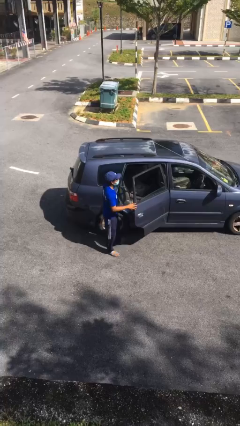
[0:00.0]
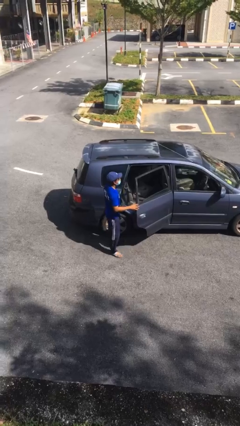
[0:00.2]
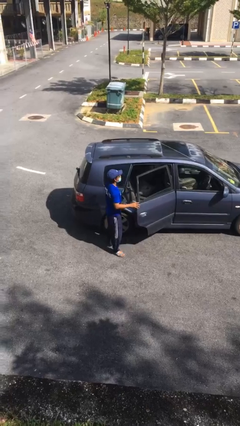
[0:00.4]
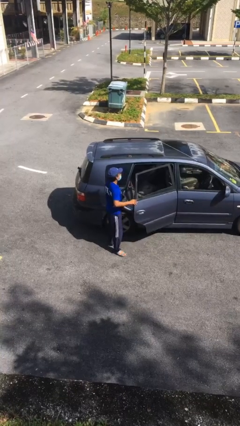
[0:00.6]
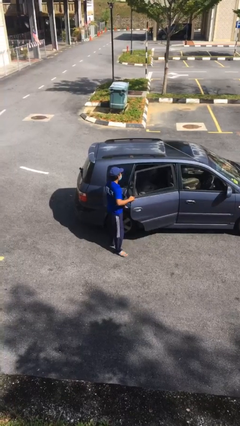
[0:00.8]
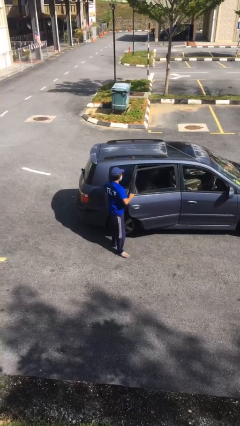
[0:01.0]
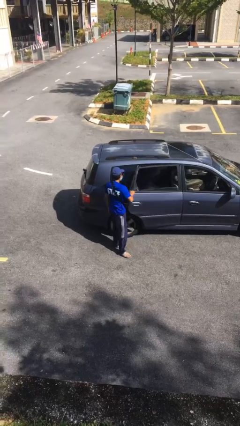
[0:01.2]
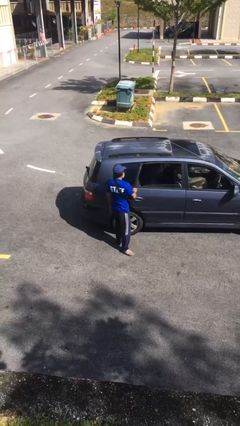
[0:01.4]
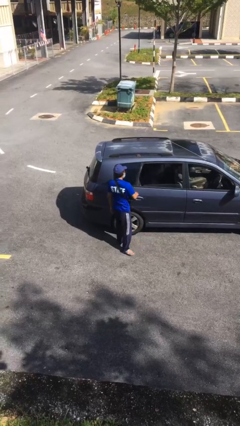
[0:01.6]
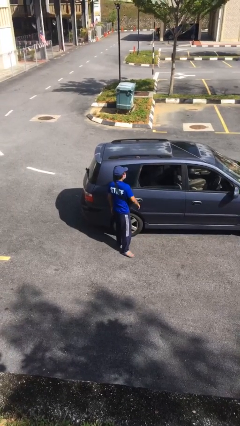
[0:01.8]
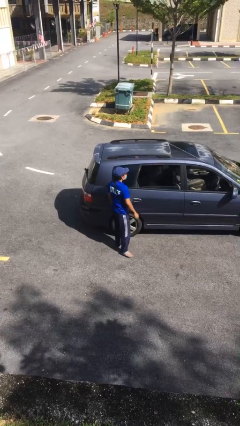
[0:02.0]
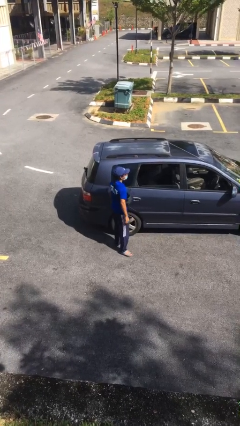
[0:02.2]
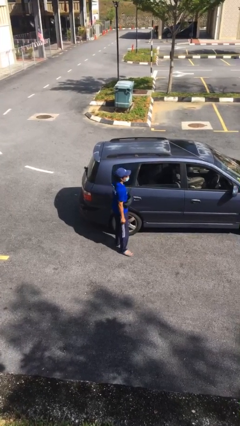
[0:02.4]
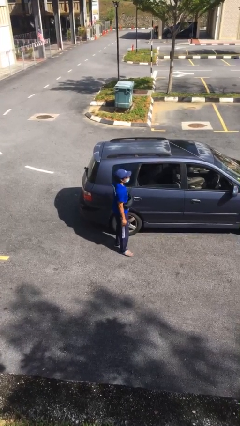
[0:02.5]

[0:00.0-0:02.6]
person closes car door

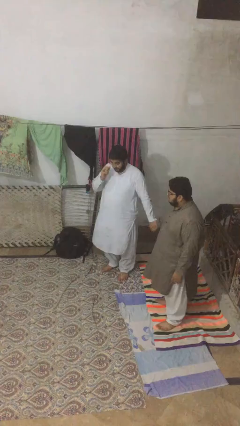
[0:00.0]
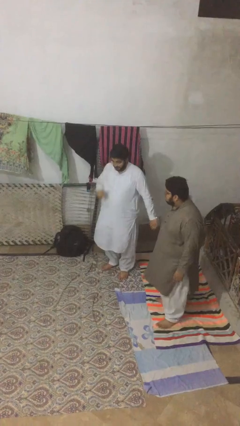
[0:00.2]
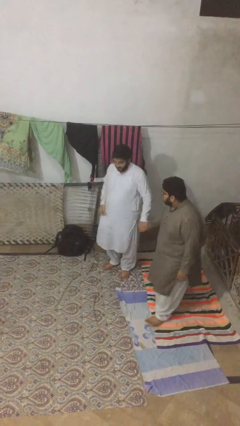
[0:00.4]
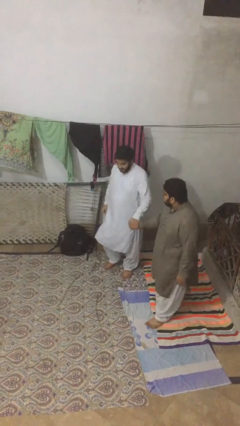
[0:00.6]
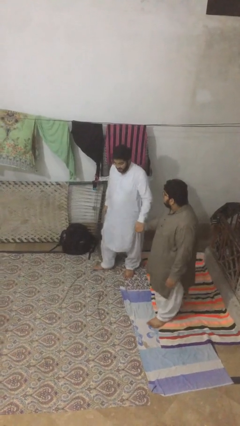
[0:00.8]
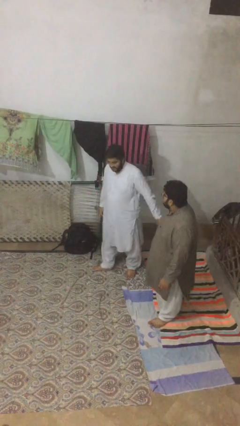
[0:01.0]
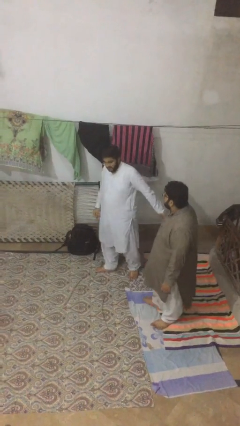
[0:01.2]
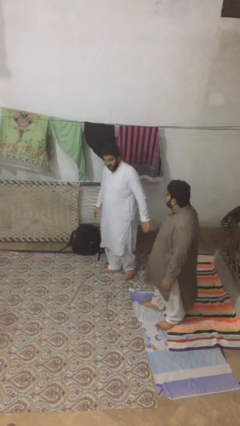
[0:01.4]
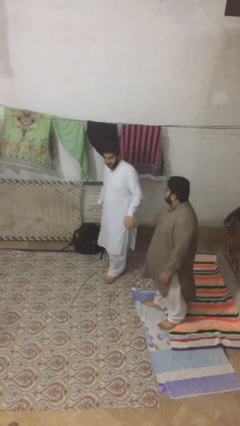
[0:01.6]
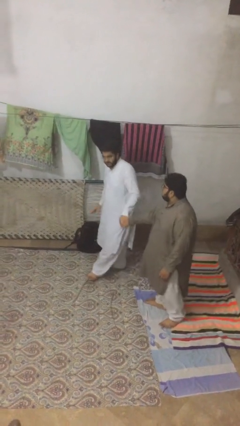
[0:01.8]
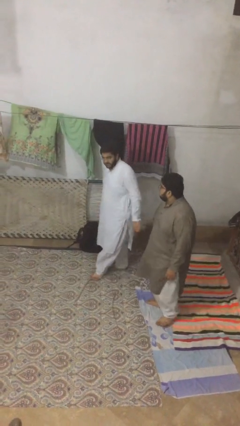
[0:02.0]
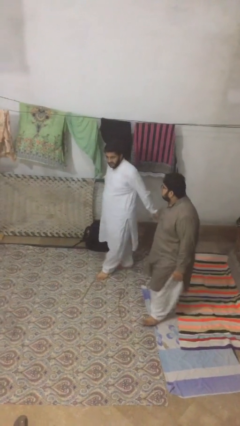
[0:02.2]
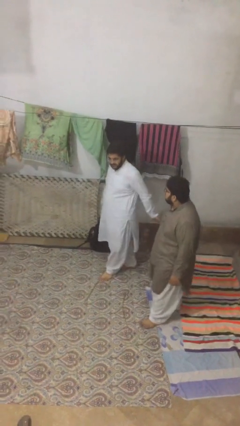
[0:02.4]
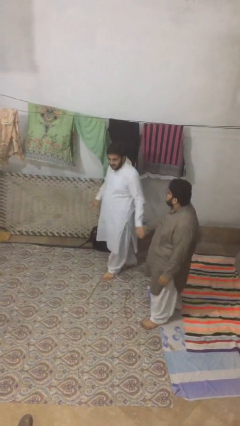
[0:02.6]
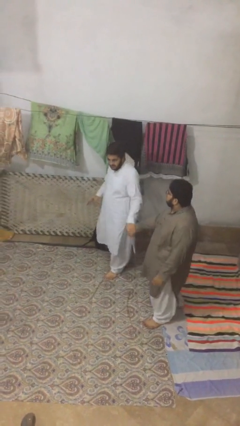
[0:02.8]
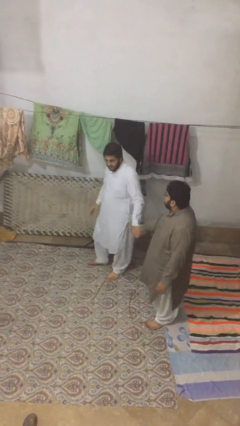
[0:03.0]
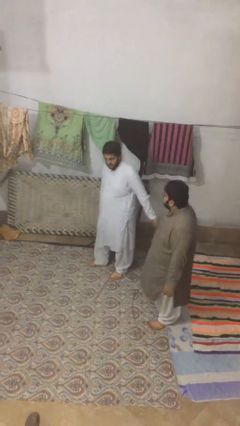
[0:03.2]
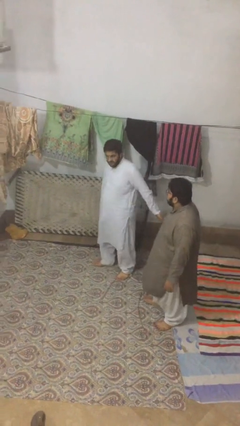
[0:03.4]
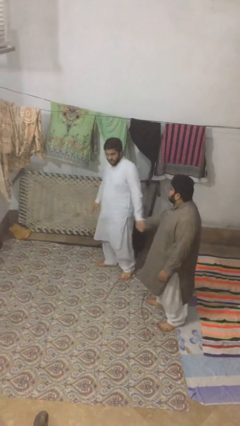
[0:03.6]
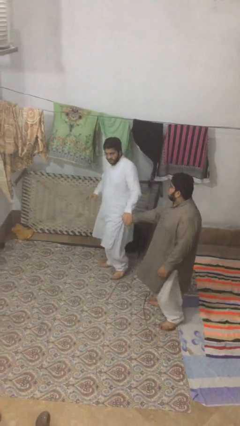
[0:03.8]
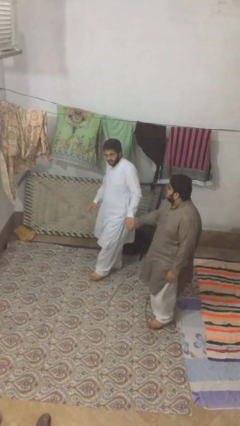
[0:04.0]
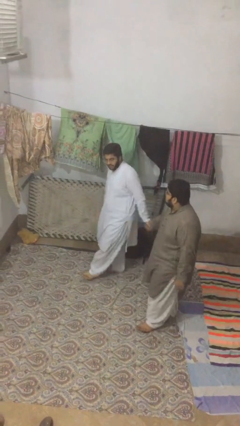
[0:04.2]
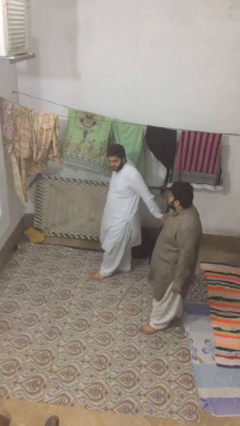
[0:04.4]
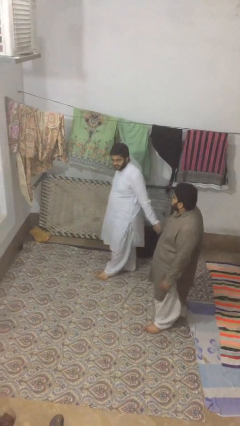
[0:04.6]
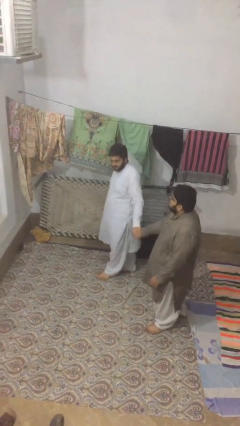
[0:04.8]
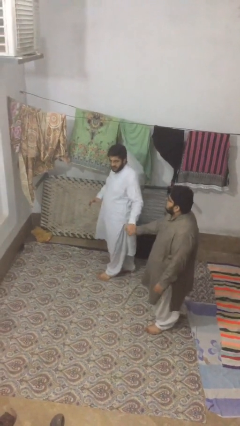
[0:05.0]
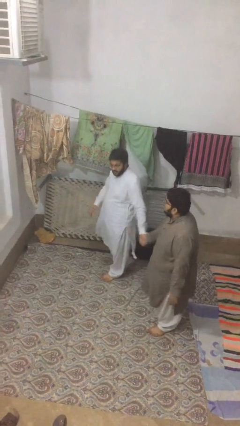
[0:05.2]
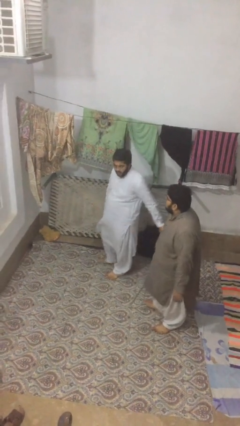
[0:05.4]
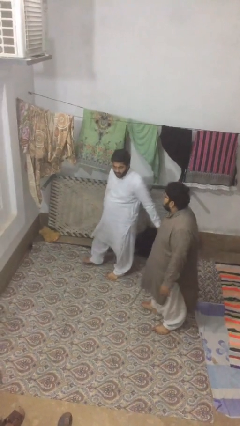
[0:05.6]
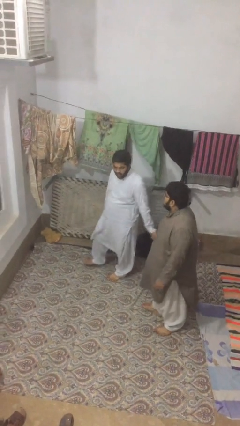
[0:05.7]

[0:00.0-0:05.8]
person holds hand

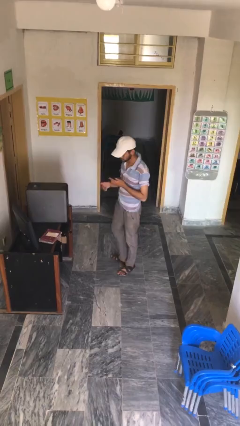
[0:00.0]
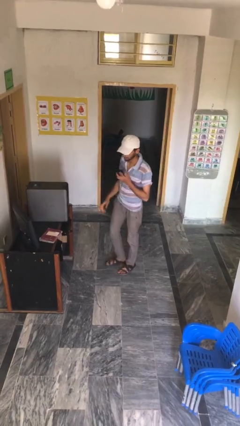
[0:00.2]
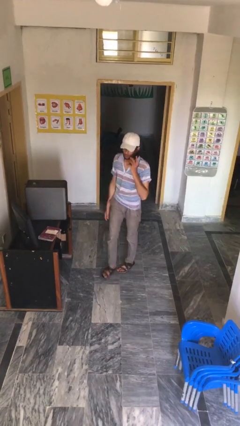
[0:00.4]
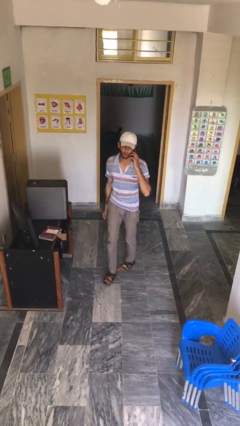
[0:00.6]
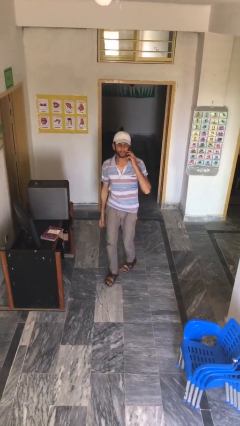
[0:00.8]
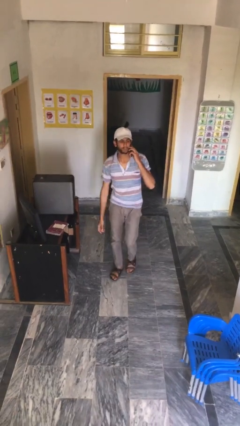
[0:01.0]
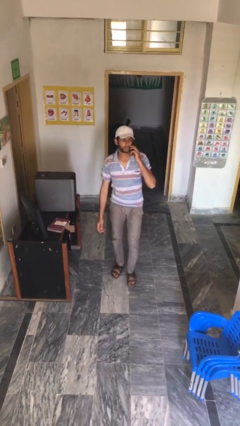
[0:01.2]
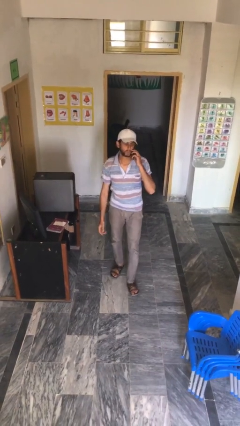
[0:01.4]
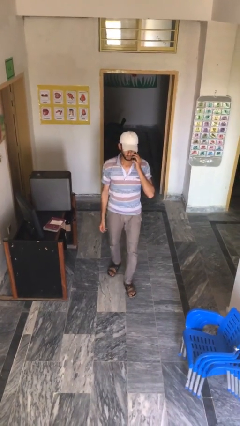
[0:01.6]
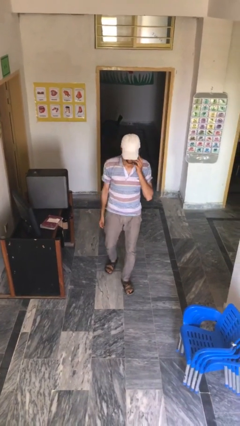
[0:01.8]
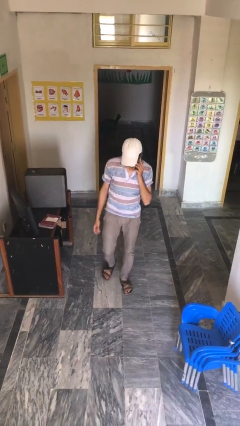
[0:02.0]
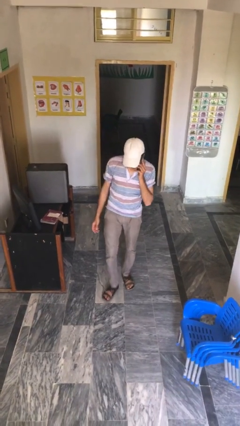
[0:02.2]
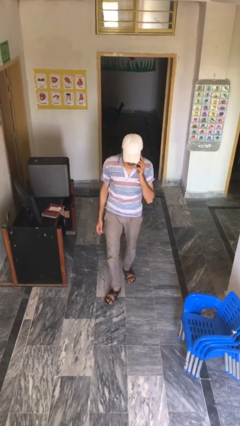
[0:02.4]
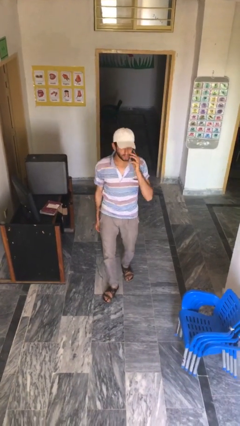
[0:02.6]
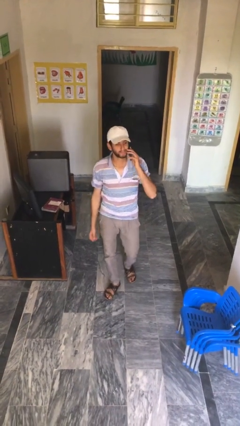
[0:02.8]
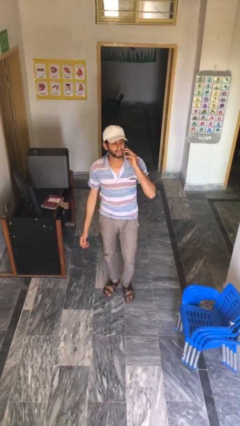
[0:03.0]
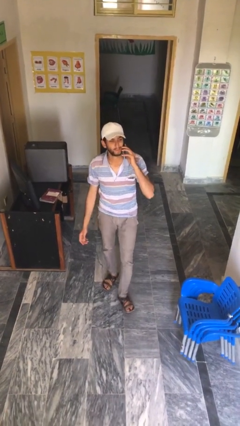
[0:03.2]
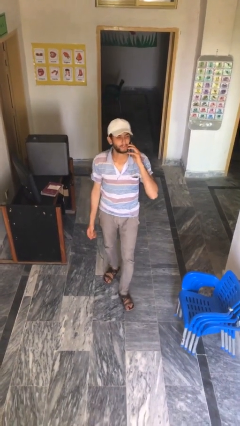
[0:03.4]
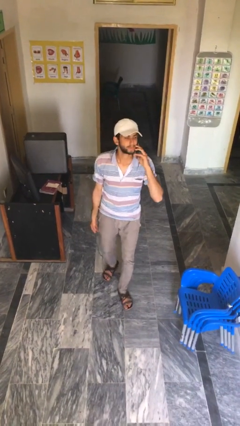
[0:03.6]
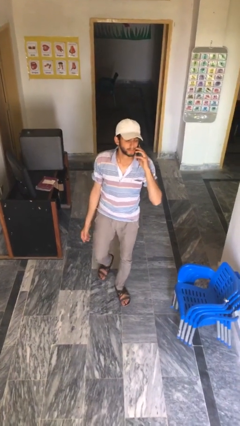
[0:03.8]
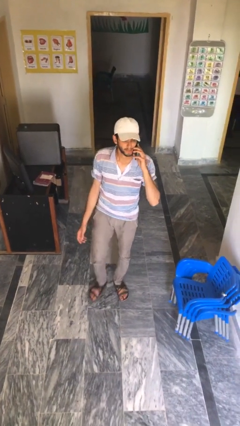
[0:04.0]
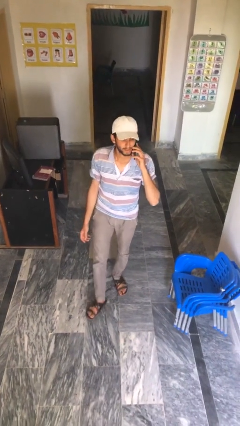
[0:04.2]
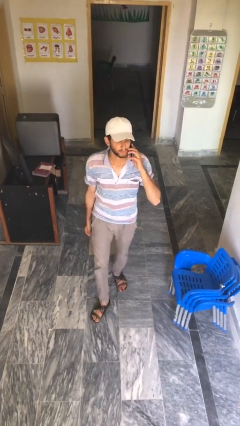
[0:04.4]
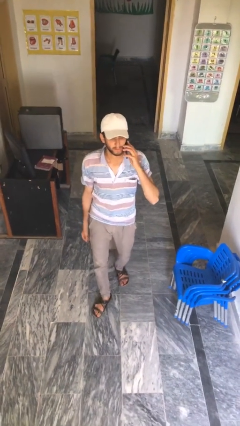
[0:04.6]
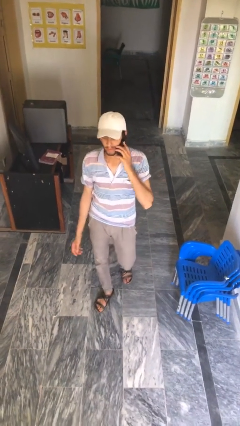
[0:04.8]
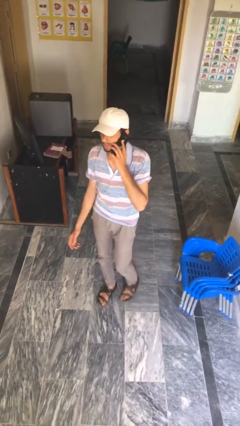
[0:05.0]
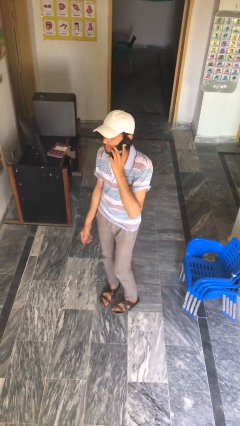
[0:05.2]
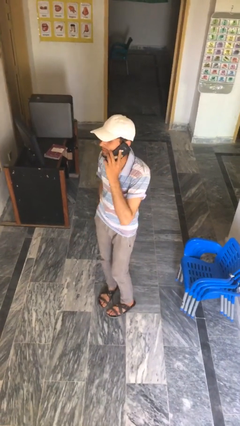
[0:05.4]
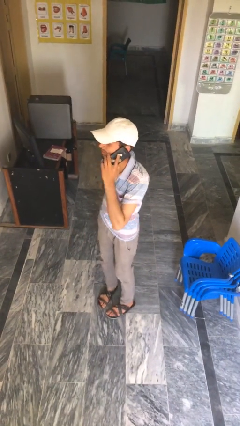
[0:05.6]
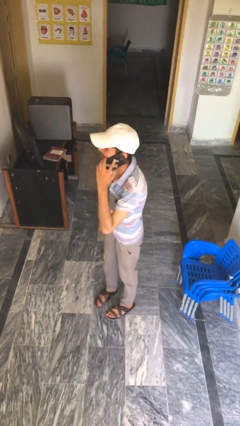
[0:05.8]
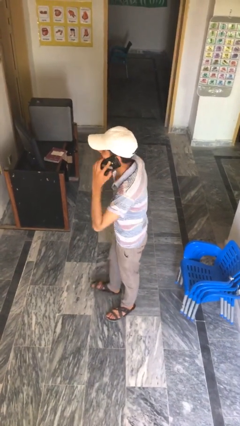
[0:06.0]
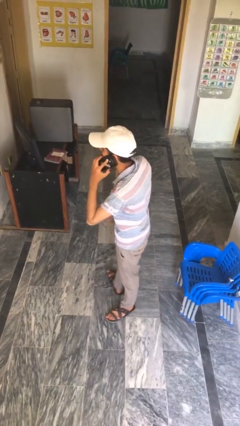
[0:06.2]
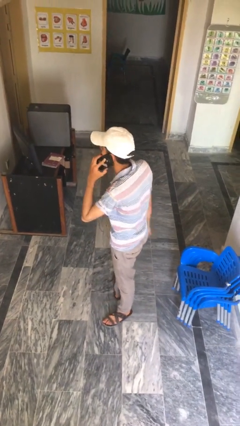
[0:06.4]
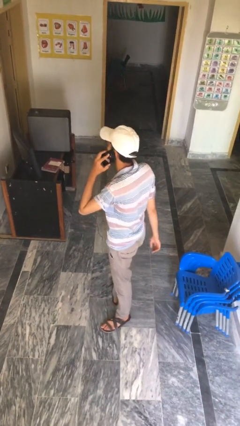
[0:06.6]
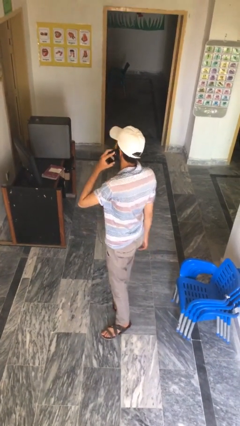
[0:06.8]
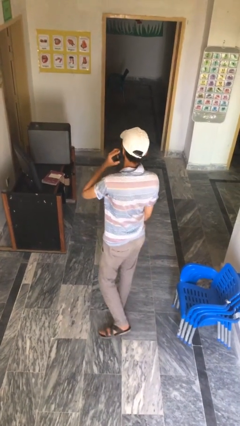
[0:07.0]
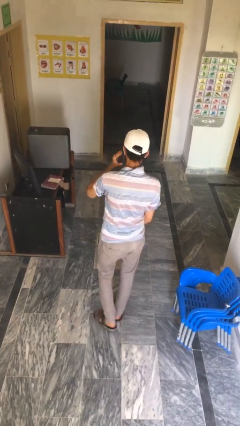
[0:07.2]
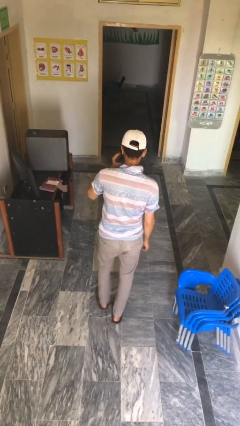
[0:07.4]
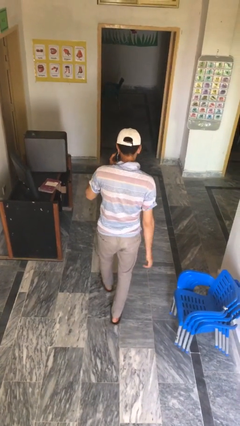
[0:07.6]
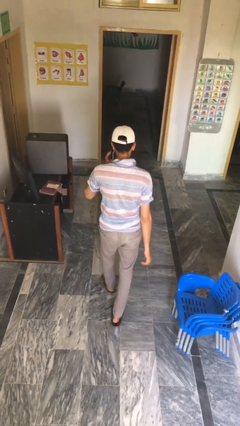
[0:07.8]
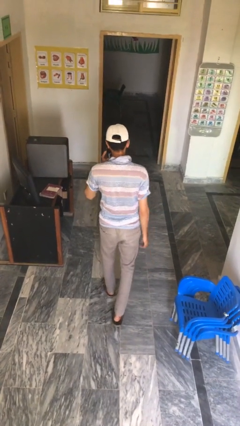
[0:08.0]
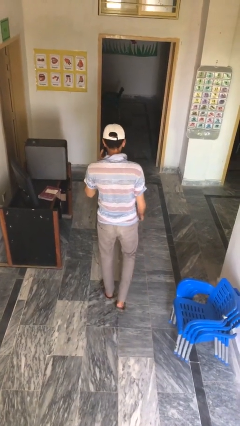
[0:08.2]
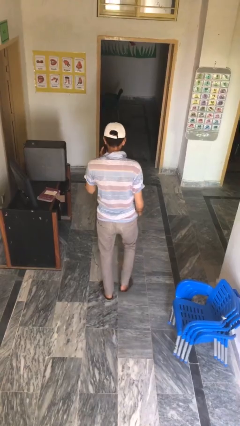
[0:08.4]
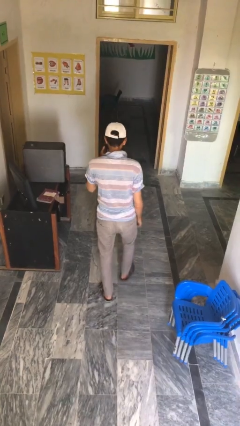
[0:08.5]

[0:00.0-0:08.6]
person talks on phone

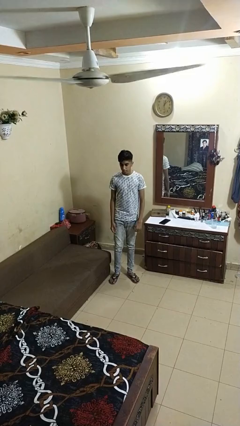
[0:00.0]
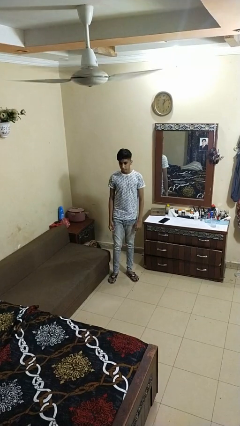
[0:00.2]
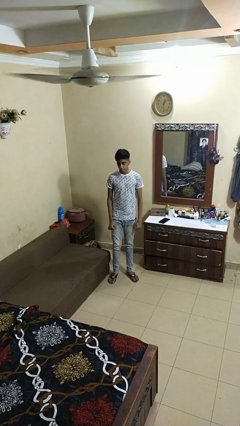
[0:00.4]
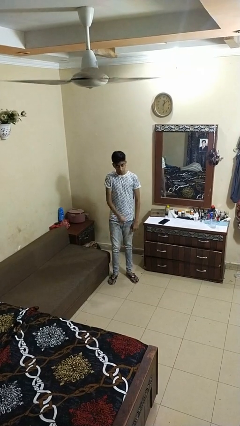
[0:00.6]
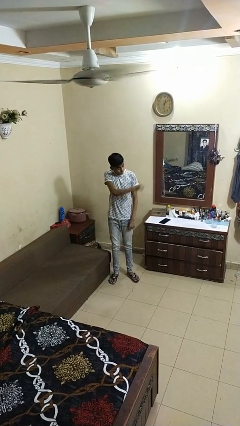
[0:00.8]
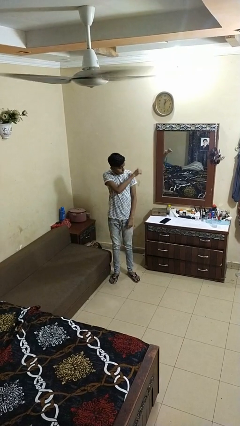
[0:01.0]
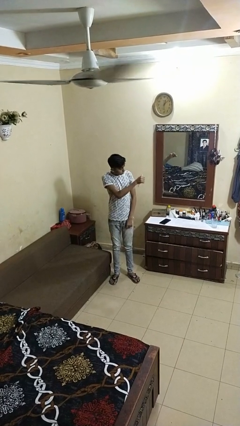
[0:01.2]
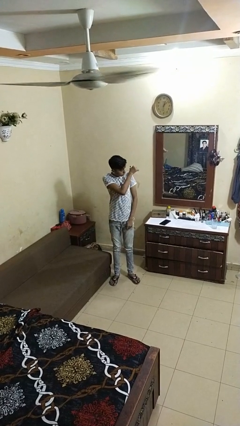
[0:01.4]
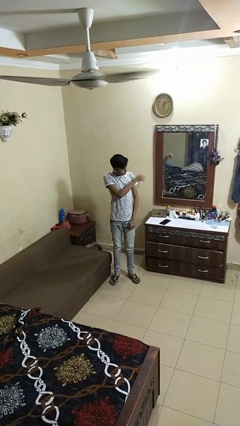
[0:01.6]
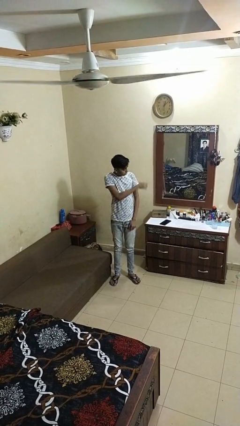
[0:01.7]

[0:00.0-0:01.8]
person gestures behind me
